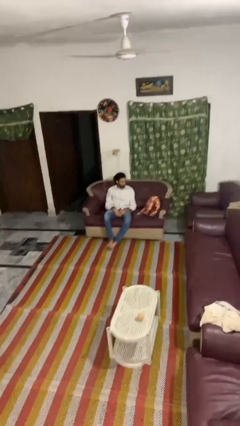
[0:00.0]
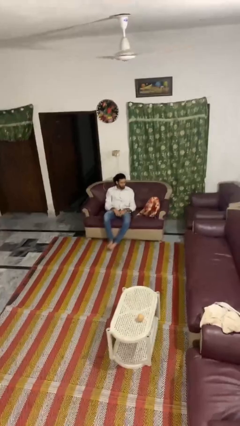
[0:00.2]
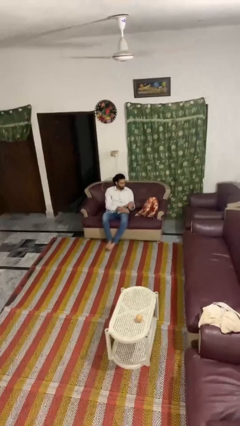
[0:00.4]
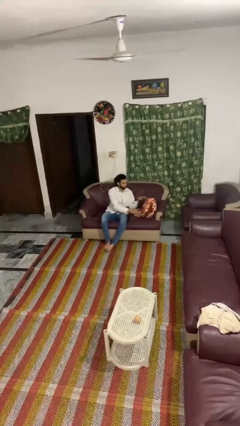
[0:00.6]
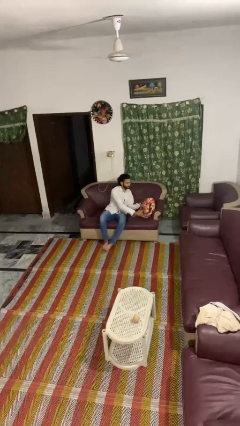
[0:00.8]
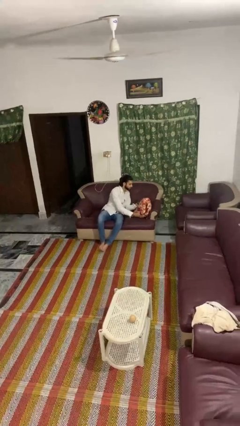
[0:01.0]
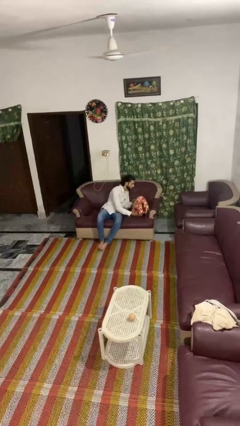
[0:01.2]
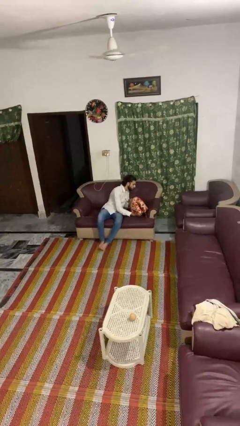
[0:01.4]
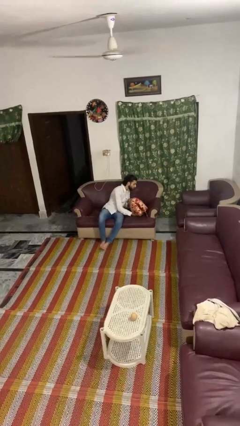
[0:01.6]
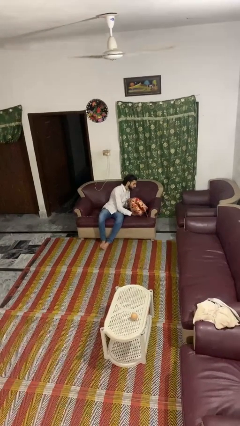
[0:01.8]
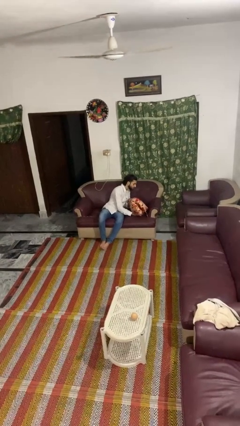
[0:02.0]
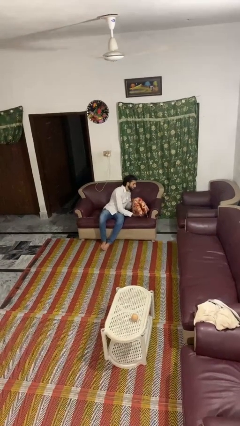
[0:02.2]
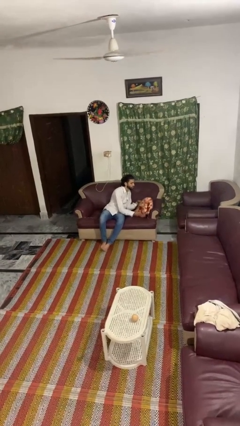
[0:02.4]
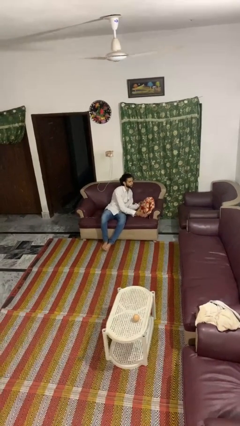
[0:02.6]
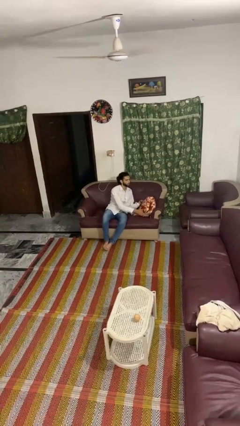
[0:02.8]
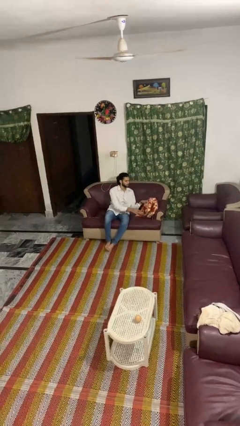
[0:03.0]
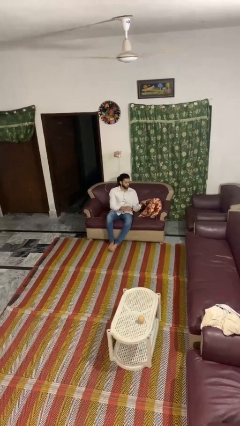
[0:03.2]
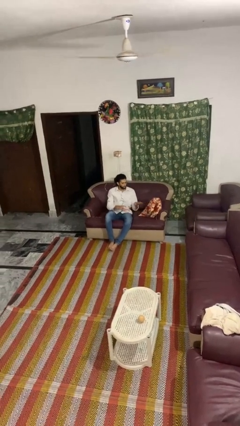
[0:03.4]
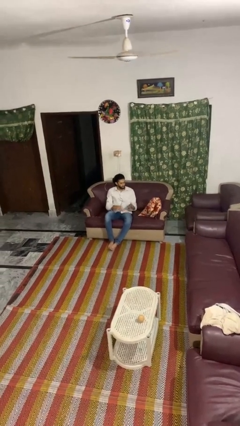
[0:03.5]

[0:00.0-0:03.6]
person searches in couch

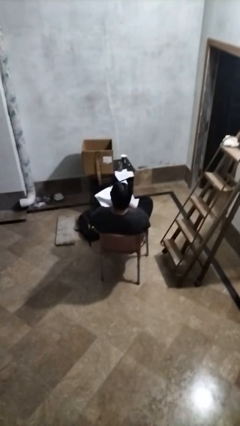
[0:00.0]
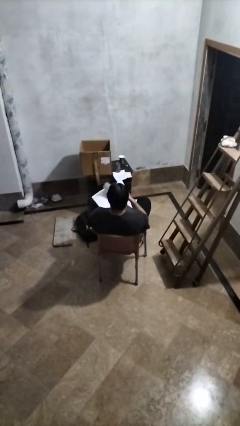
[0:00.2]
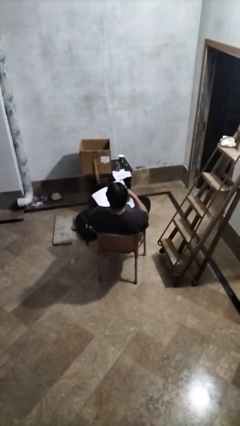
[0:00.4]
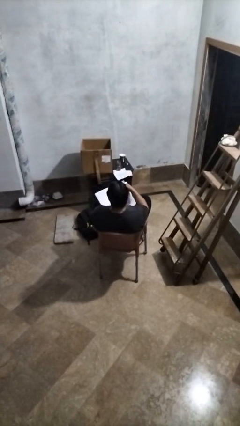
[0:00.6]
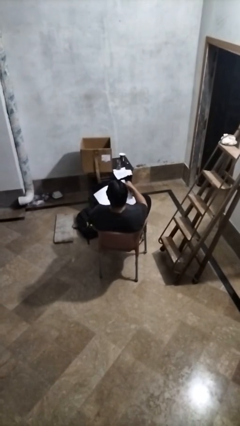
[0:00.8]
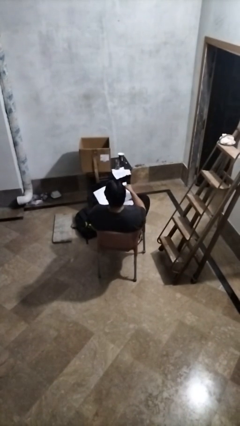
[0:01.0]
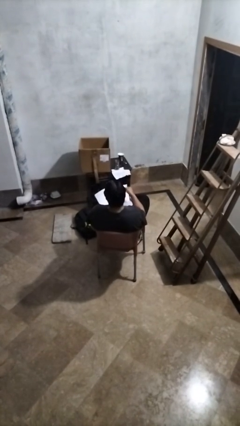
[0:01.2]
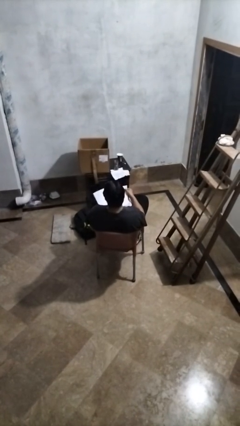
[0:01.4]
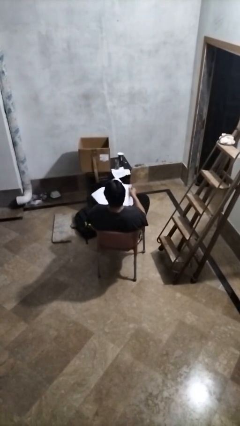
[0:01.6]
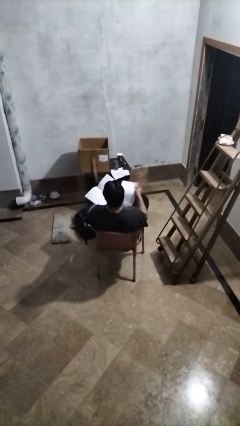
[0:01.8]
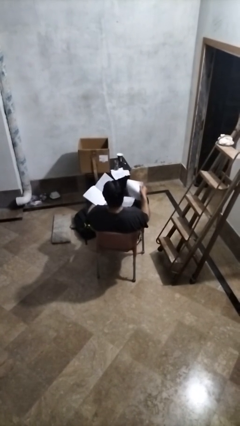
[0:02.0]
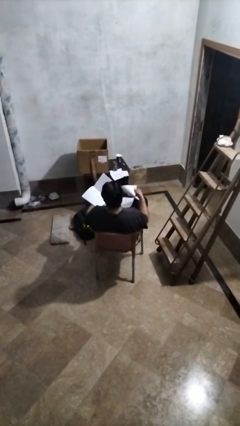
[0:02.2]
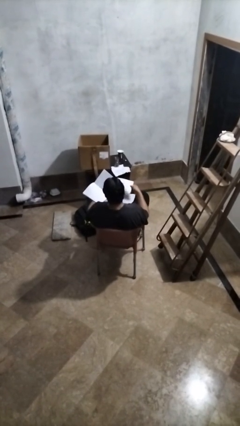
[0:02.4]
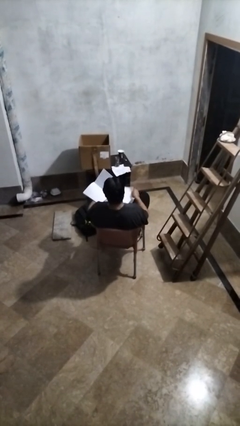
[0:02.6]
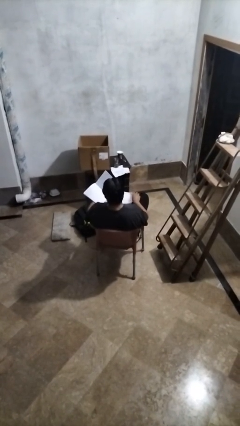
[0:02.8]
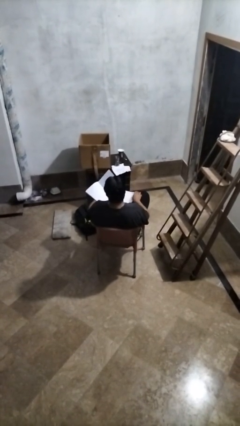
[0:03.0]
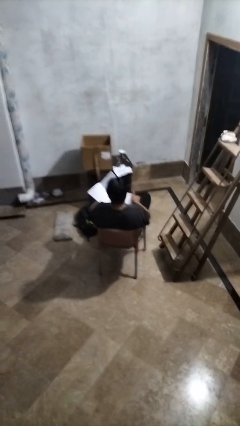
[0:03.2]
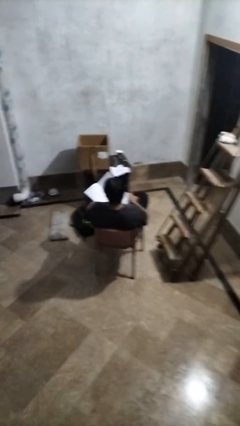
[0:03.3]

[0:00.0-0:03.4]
person tears paper

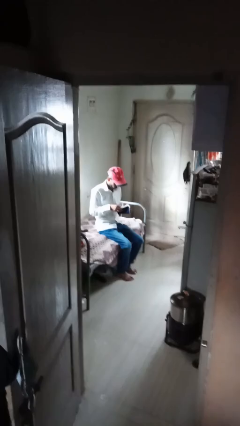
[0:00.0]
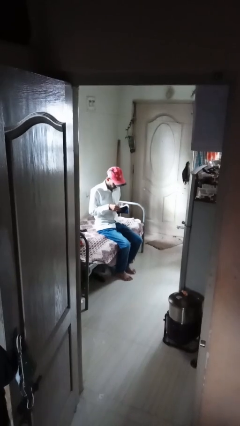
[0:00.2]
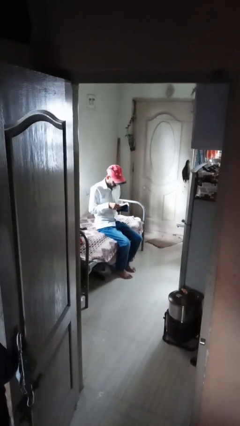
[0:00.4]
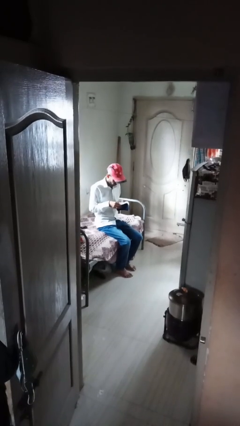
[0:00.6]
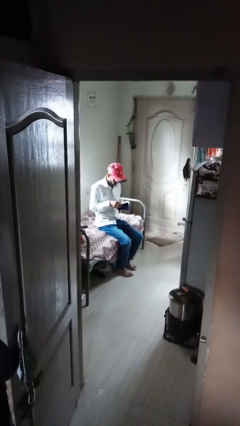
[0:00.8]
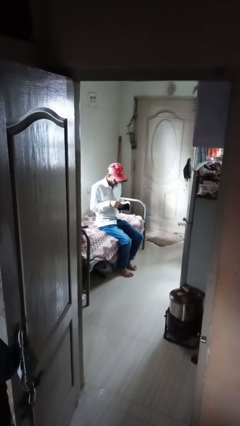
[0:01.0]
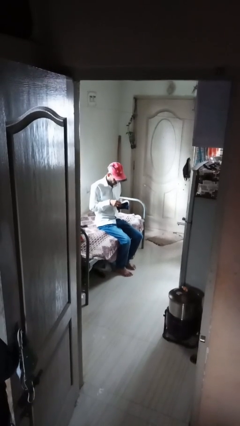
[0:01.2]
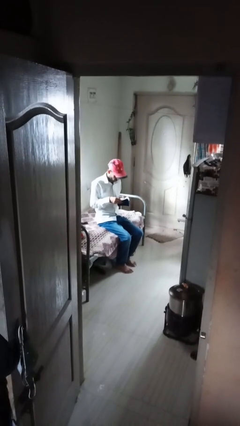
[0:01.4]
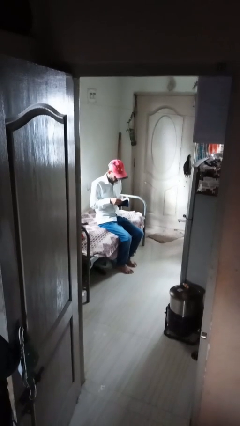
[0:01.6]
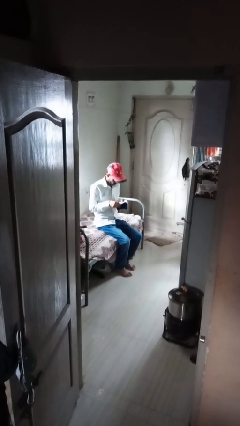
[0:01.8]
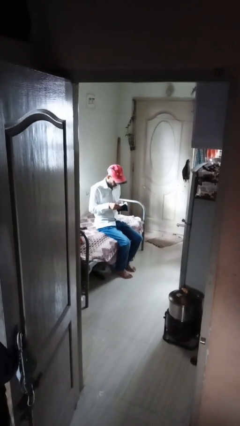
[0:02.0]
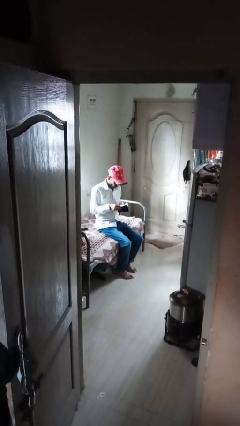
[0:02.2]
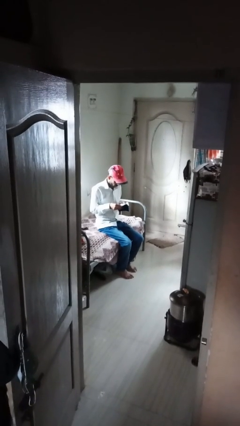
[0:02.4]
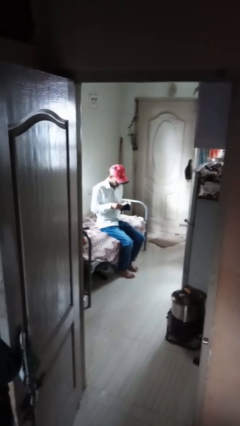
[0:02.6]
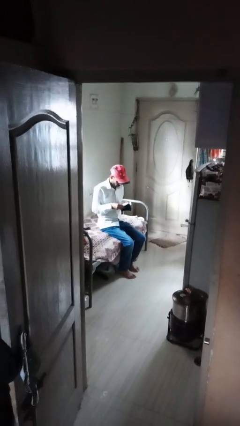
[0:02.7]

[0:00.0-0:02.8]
person searches in purse

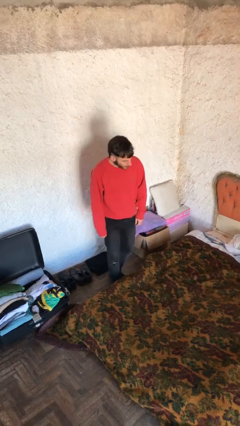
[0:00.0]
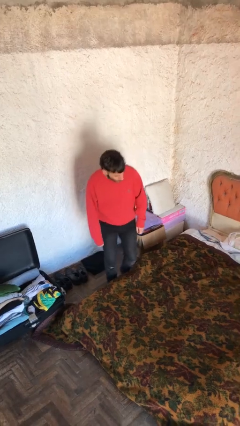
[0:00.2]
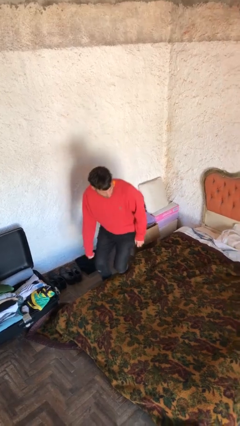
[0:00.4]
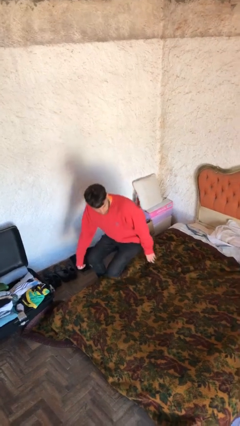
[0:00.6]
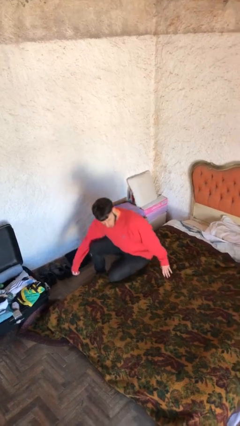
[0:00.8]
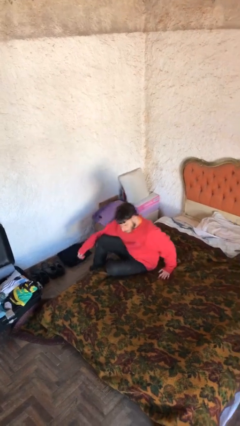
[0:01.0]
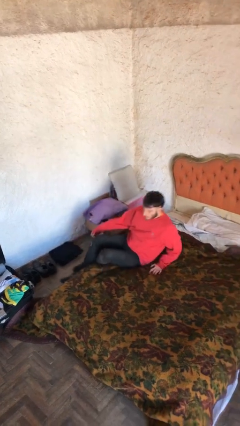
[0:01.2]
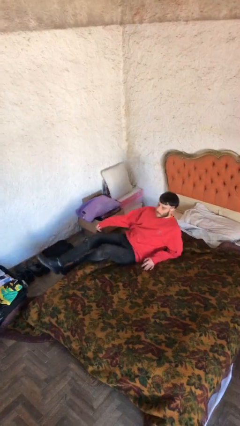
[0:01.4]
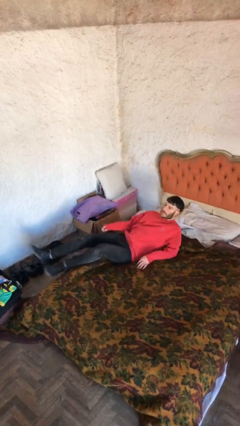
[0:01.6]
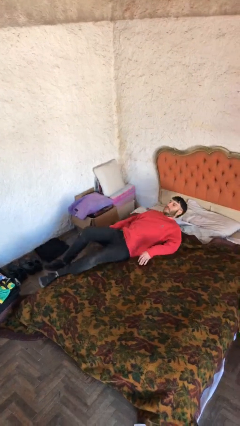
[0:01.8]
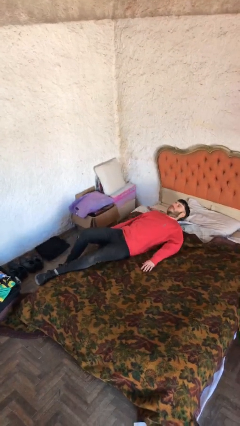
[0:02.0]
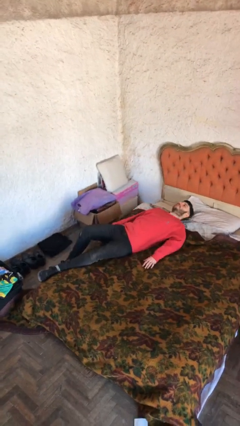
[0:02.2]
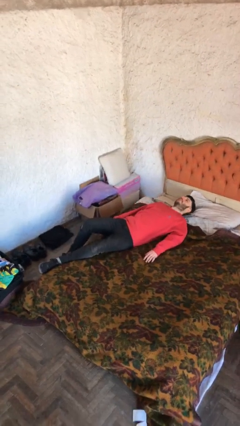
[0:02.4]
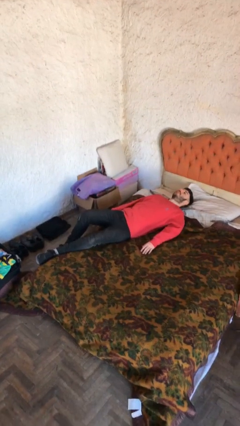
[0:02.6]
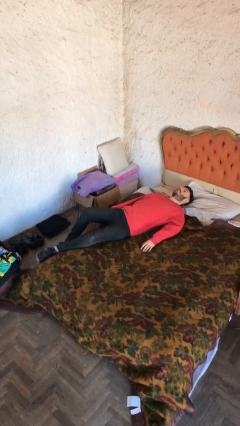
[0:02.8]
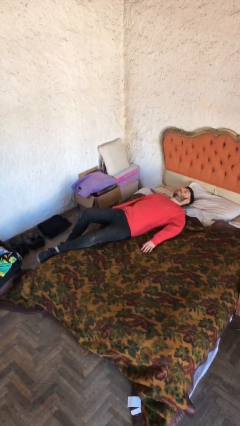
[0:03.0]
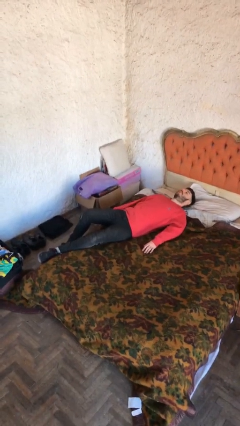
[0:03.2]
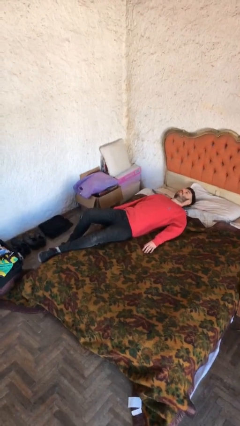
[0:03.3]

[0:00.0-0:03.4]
person lies down on bed

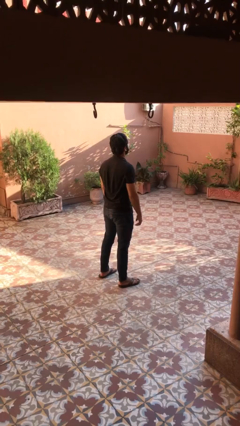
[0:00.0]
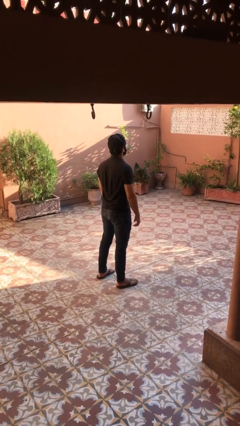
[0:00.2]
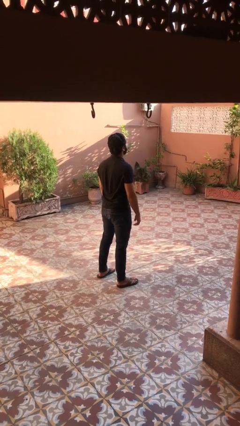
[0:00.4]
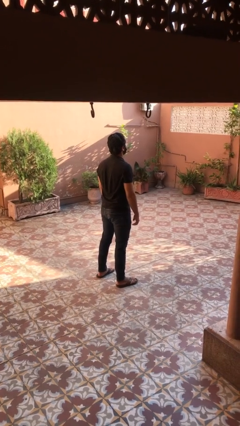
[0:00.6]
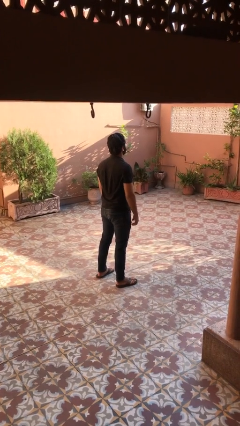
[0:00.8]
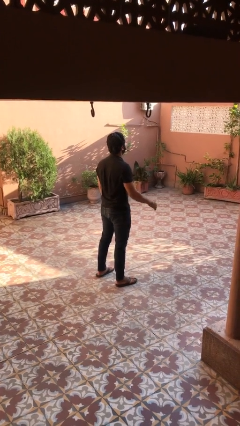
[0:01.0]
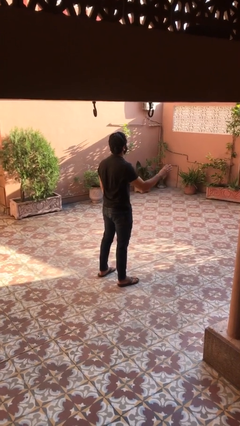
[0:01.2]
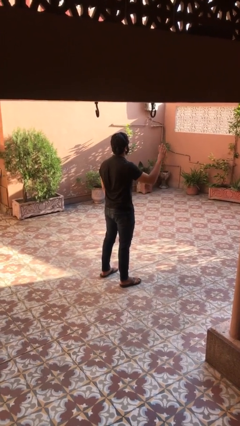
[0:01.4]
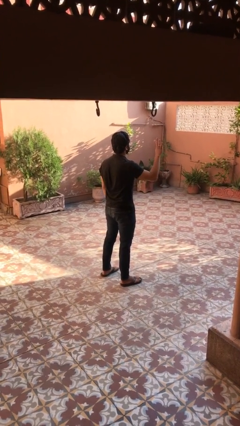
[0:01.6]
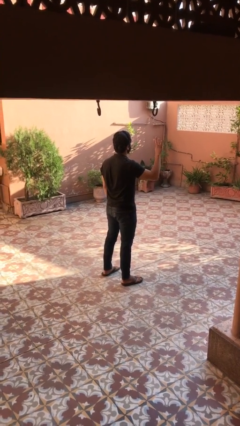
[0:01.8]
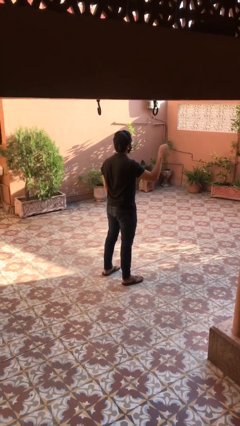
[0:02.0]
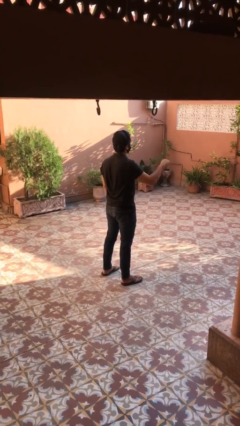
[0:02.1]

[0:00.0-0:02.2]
person gestures number four

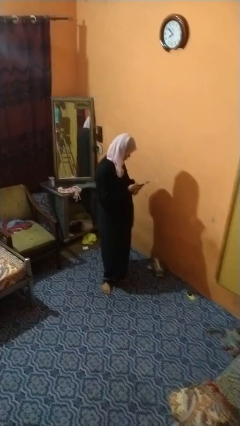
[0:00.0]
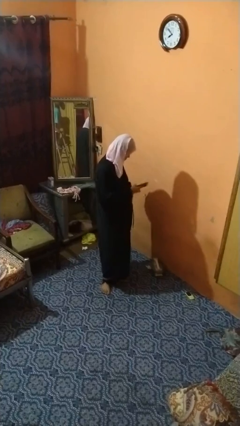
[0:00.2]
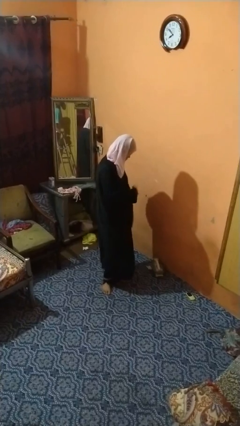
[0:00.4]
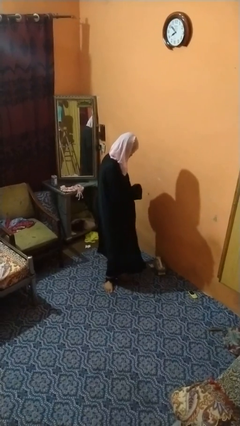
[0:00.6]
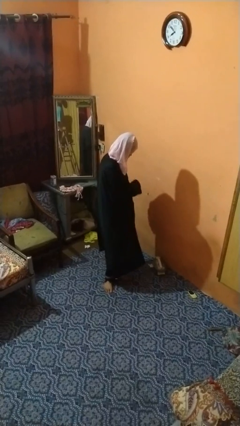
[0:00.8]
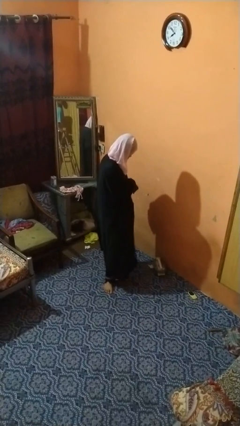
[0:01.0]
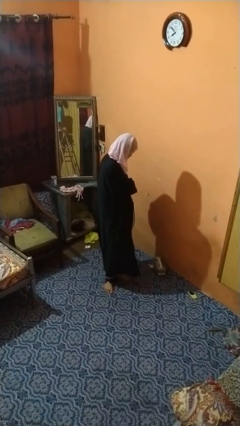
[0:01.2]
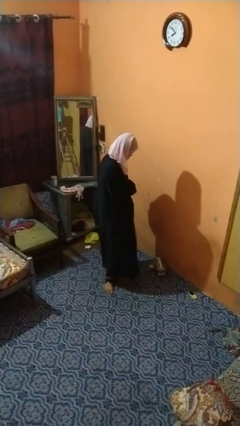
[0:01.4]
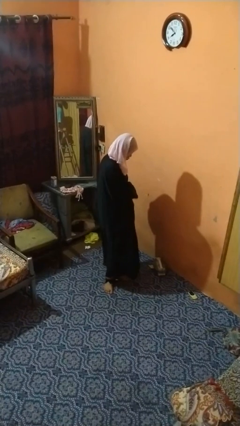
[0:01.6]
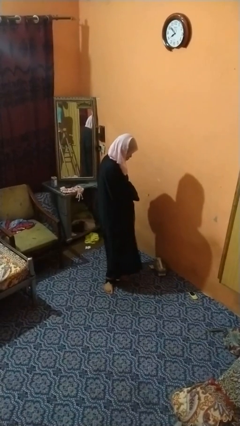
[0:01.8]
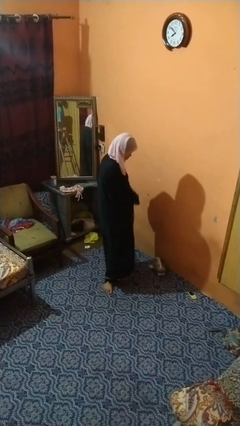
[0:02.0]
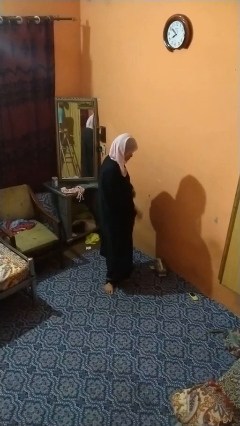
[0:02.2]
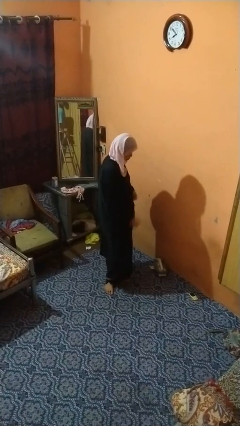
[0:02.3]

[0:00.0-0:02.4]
person puts phone into pocket
